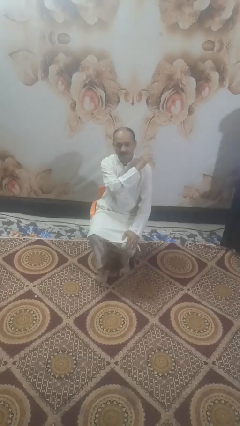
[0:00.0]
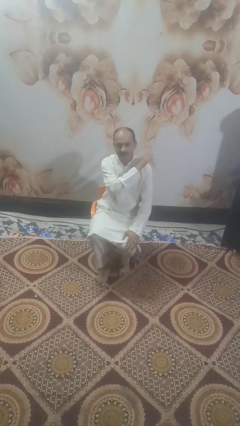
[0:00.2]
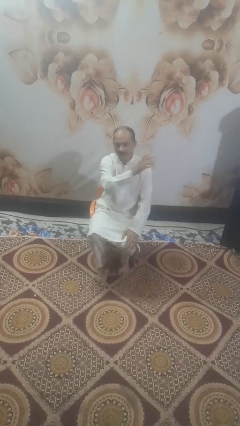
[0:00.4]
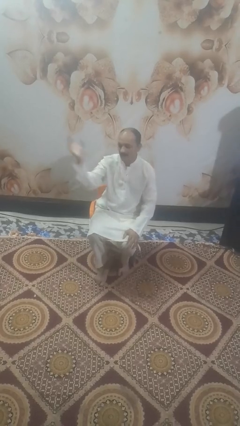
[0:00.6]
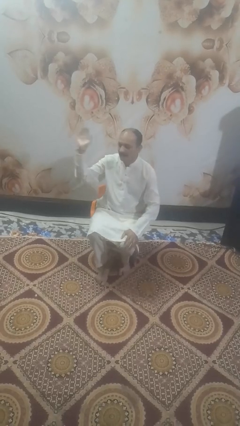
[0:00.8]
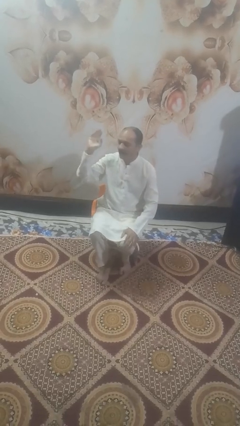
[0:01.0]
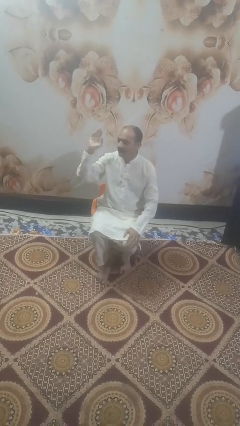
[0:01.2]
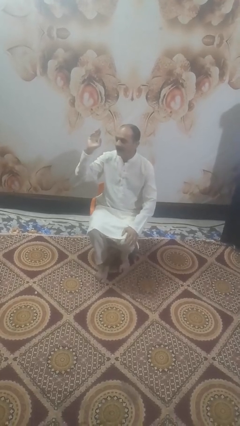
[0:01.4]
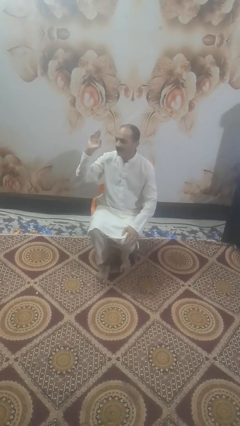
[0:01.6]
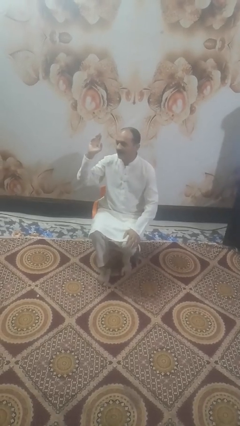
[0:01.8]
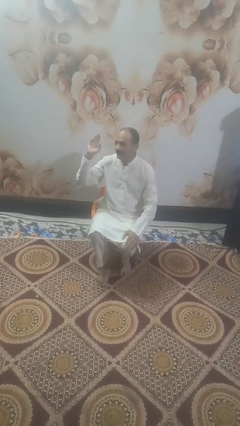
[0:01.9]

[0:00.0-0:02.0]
person gestures swipe right

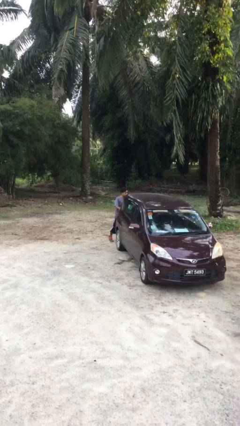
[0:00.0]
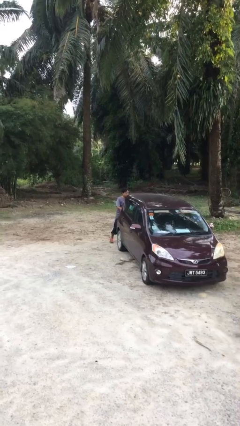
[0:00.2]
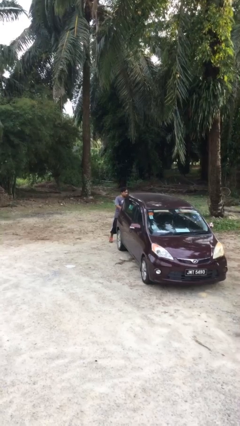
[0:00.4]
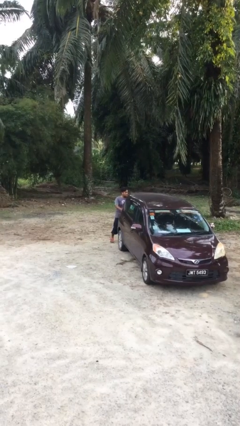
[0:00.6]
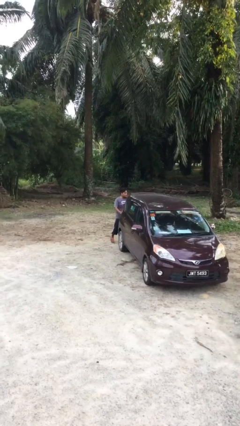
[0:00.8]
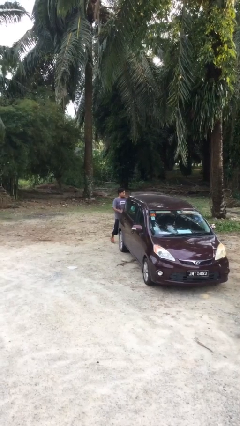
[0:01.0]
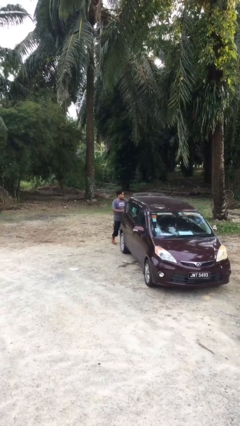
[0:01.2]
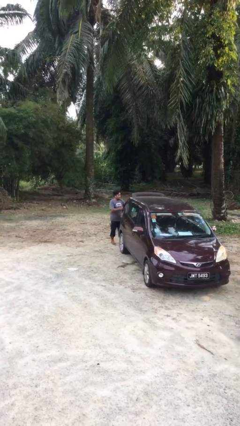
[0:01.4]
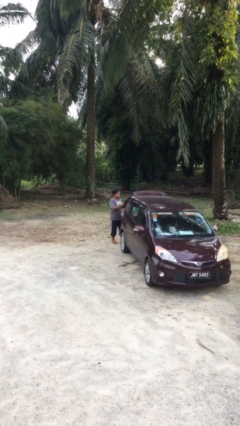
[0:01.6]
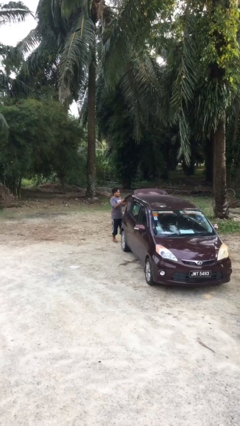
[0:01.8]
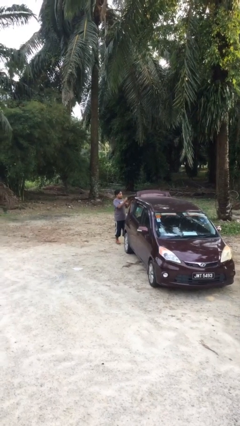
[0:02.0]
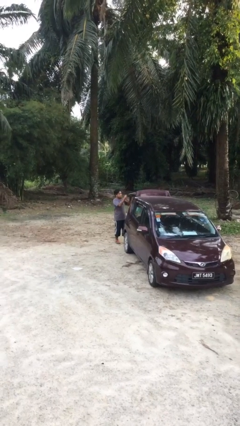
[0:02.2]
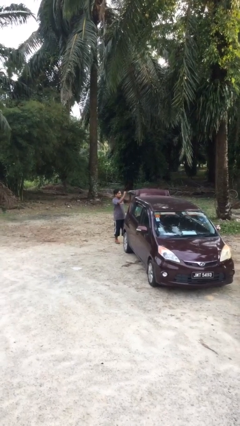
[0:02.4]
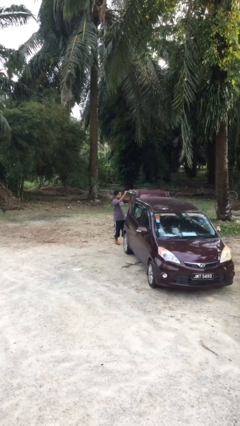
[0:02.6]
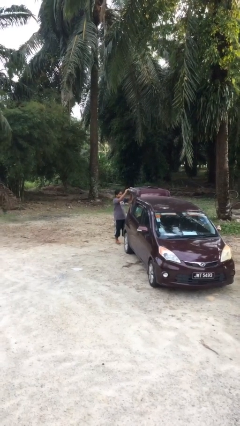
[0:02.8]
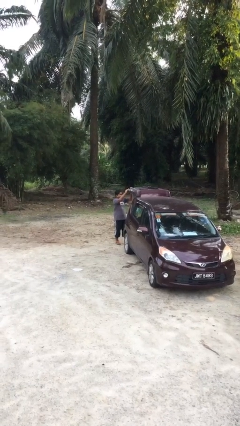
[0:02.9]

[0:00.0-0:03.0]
person opens car trunk

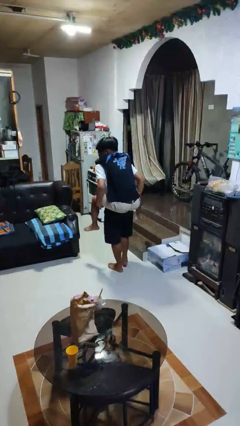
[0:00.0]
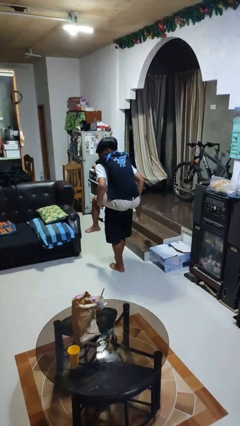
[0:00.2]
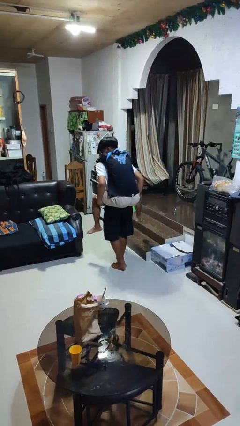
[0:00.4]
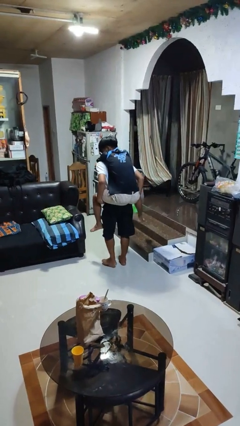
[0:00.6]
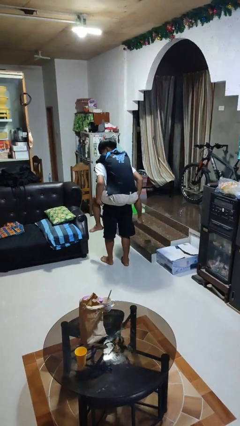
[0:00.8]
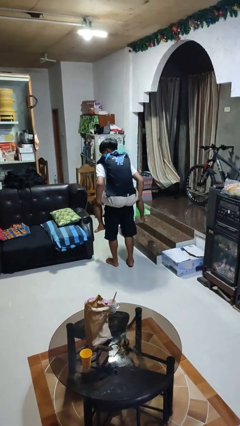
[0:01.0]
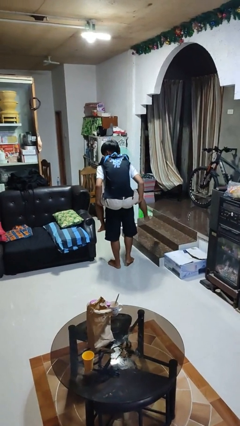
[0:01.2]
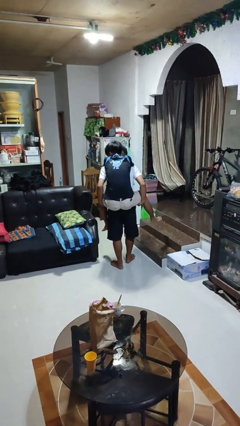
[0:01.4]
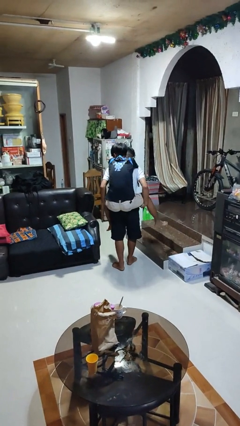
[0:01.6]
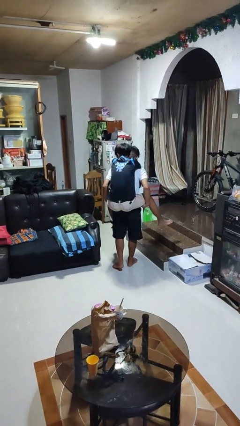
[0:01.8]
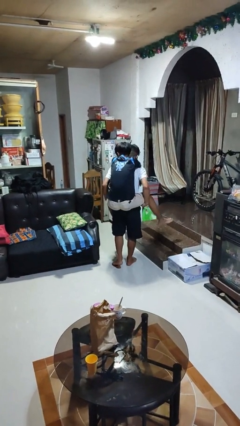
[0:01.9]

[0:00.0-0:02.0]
person carries person on back

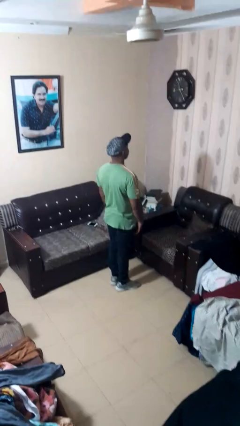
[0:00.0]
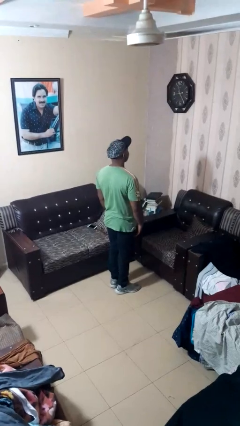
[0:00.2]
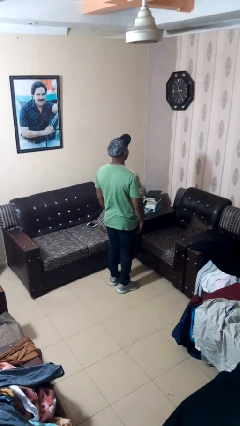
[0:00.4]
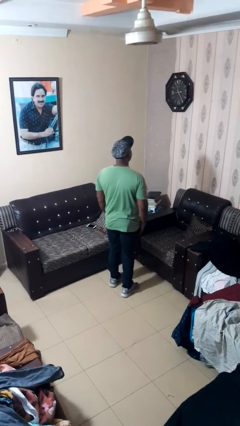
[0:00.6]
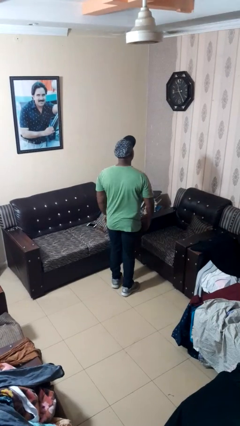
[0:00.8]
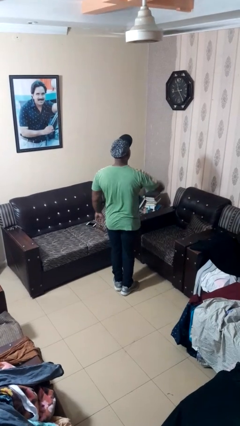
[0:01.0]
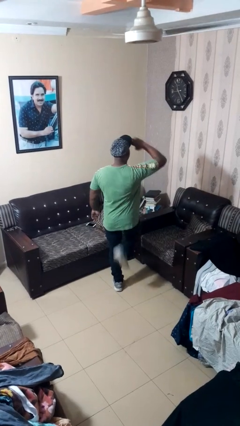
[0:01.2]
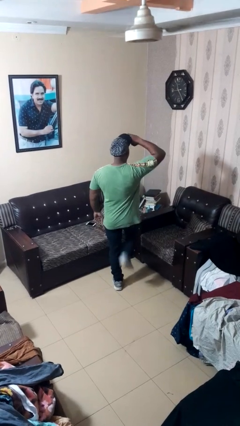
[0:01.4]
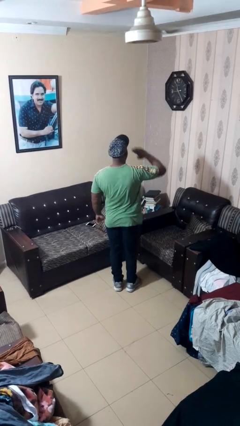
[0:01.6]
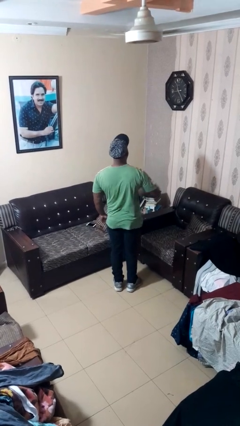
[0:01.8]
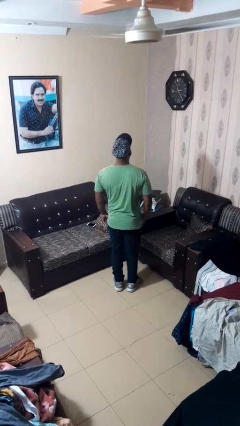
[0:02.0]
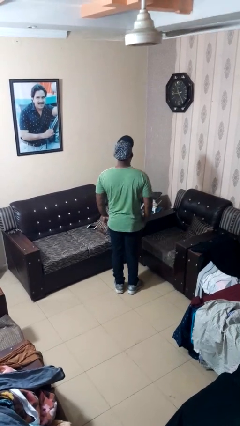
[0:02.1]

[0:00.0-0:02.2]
person salutes

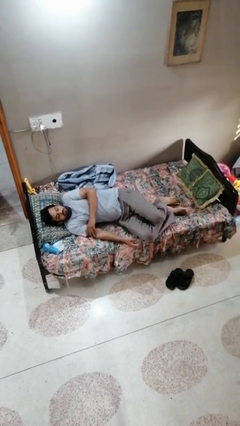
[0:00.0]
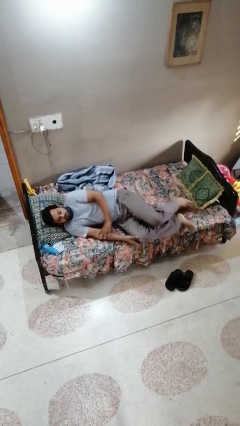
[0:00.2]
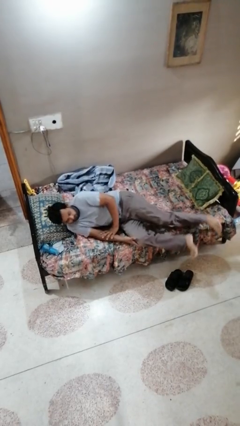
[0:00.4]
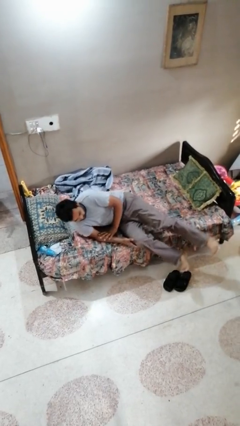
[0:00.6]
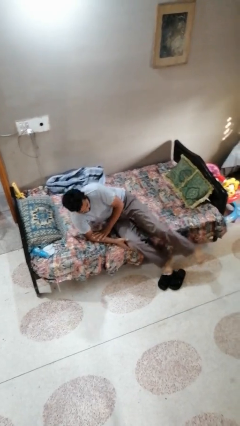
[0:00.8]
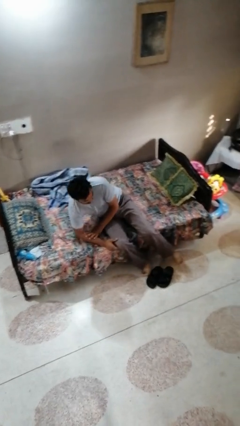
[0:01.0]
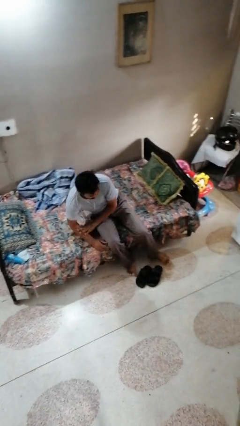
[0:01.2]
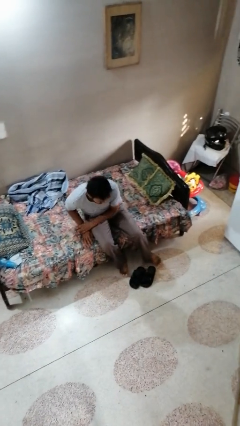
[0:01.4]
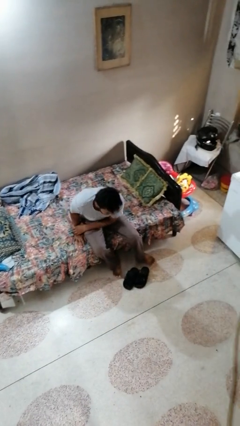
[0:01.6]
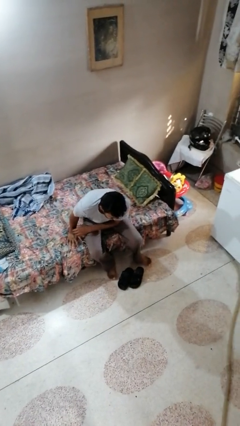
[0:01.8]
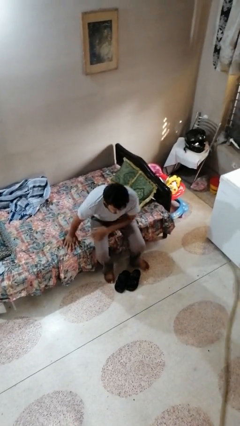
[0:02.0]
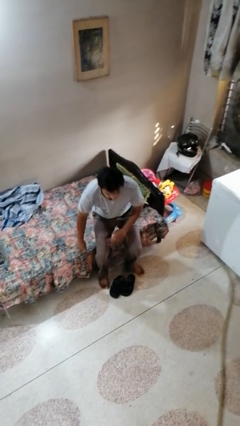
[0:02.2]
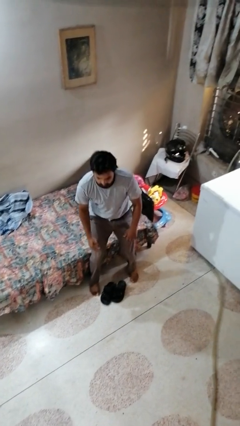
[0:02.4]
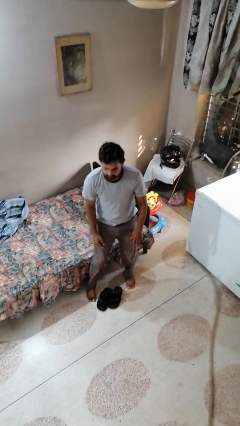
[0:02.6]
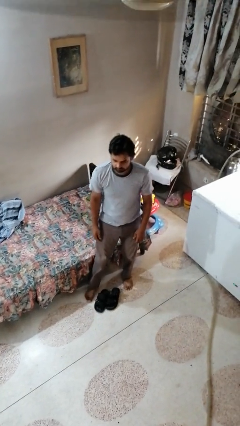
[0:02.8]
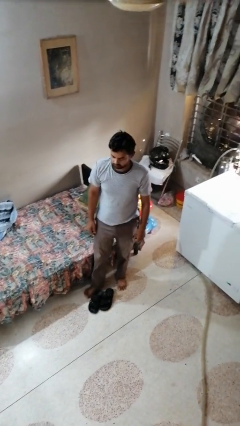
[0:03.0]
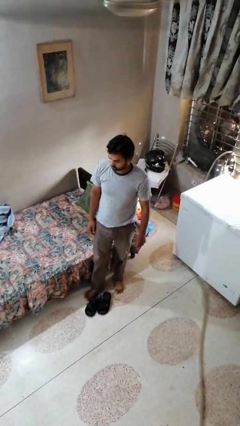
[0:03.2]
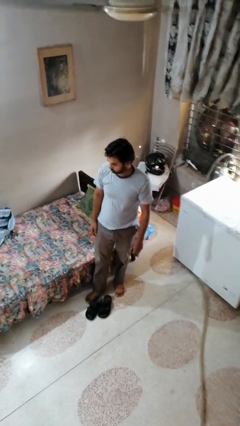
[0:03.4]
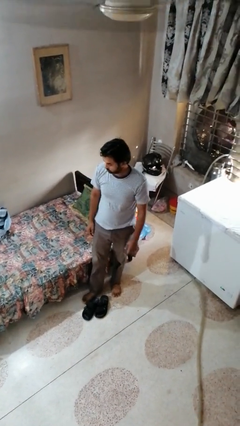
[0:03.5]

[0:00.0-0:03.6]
person stands up

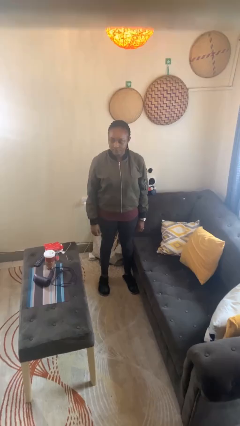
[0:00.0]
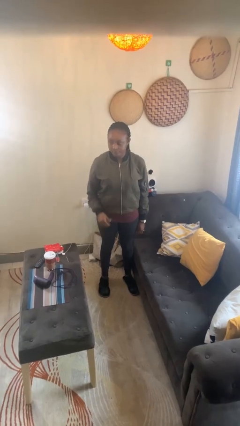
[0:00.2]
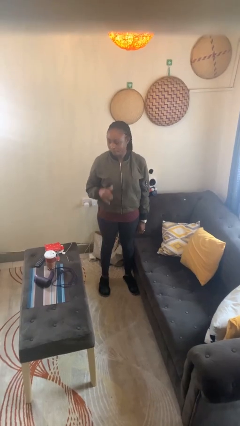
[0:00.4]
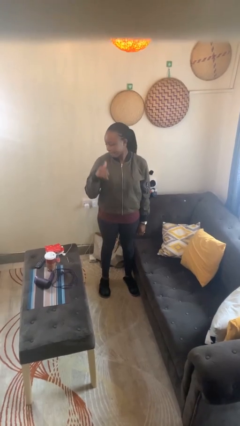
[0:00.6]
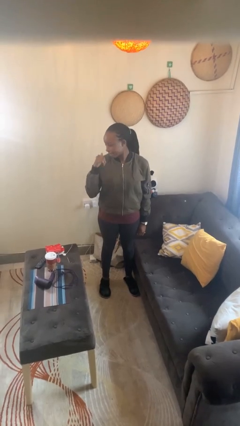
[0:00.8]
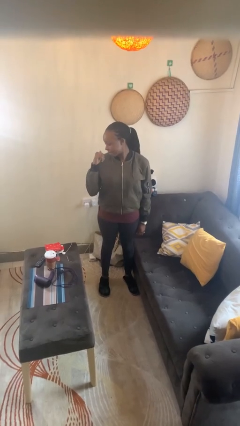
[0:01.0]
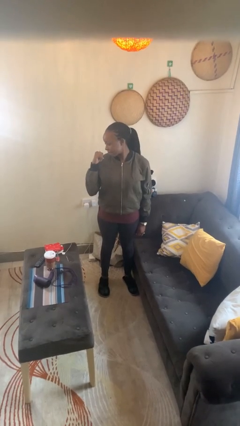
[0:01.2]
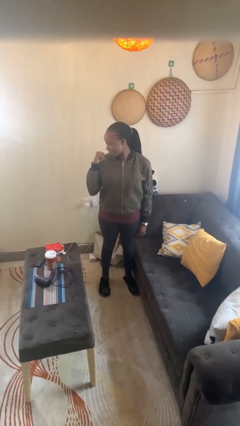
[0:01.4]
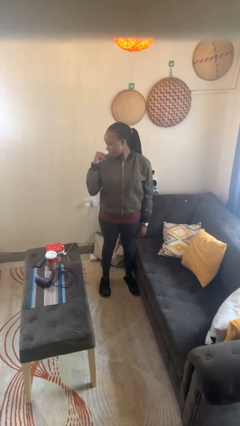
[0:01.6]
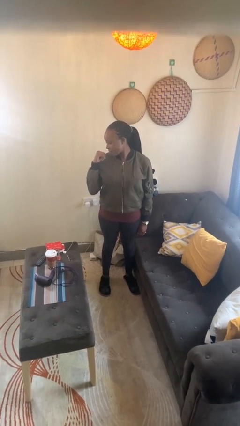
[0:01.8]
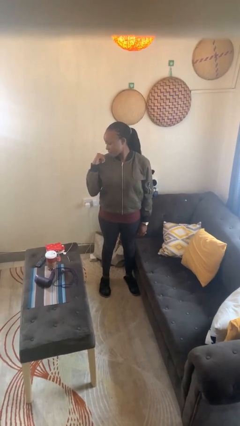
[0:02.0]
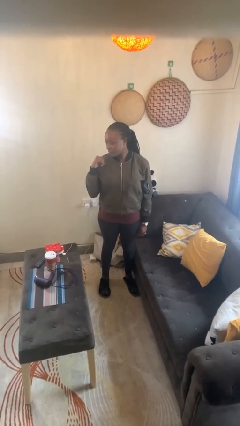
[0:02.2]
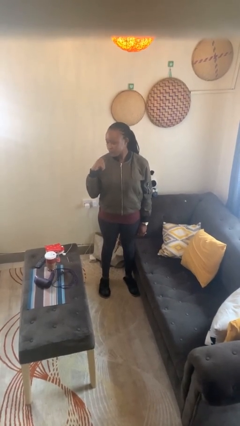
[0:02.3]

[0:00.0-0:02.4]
person gestures behind me

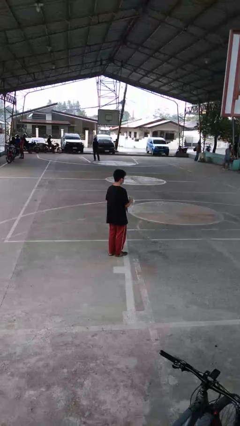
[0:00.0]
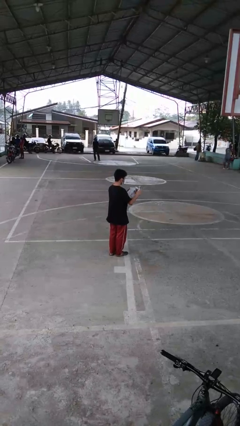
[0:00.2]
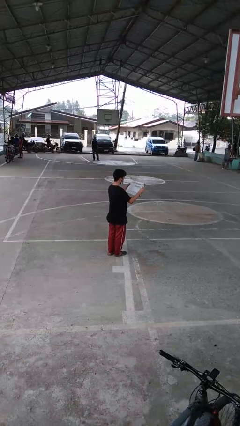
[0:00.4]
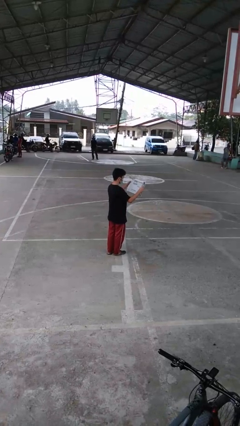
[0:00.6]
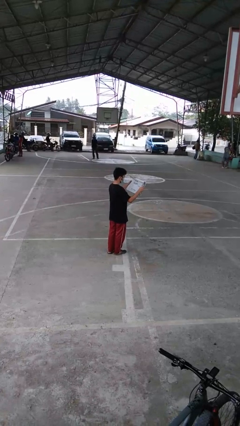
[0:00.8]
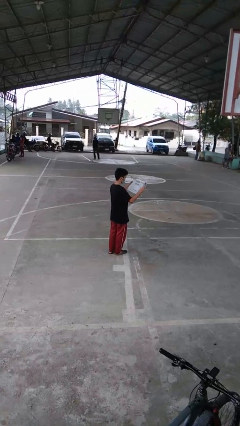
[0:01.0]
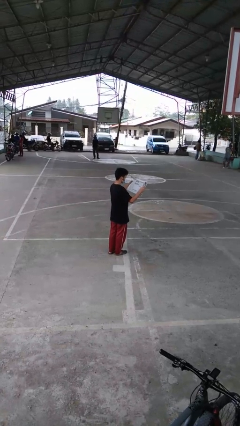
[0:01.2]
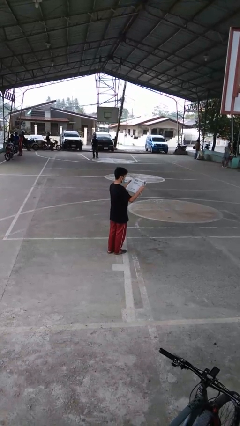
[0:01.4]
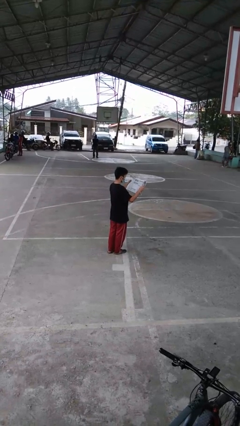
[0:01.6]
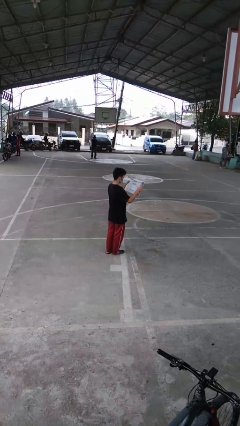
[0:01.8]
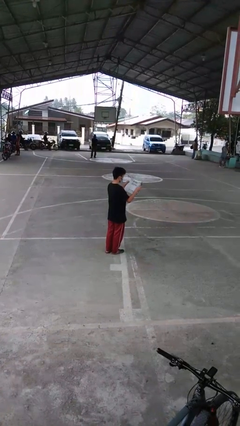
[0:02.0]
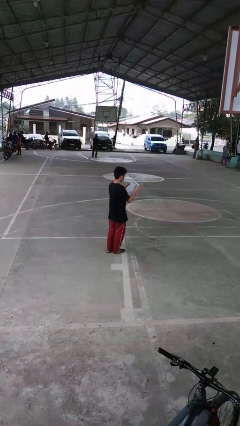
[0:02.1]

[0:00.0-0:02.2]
person reads newspaper
